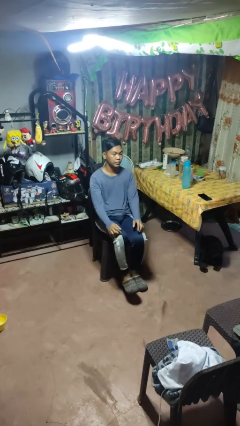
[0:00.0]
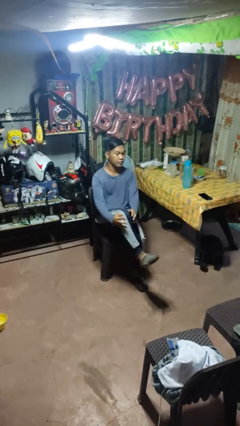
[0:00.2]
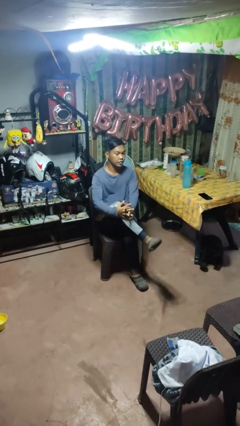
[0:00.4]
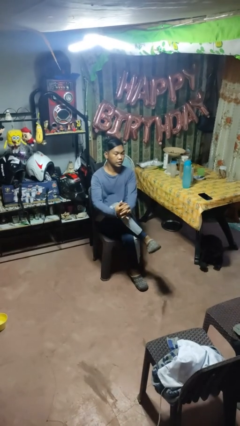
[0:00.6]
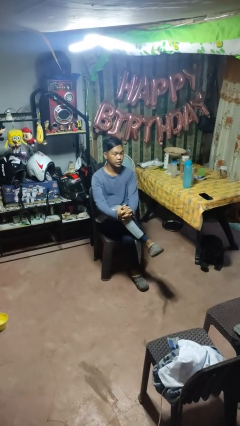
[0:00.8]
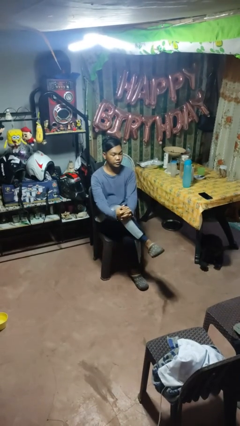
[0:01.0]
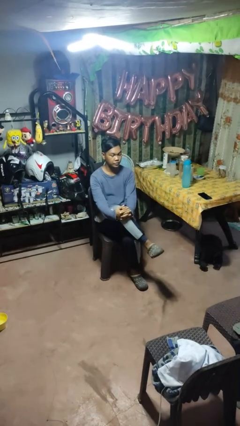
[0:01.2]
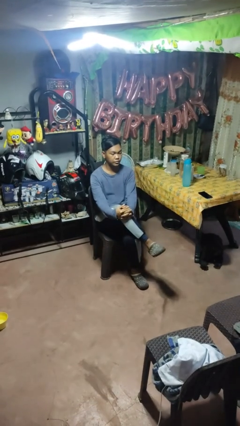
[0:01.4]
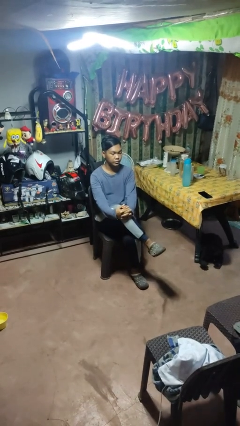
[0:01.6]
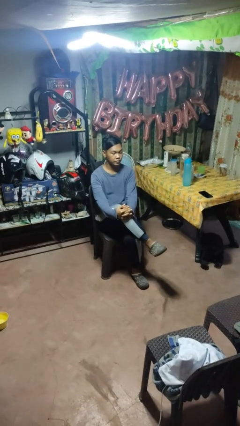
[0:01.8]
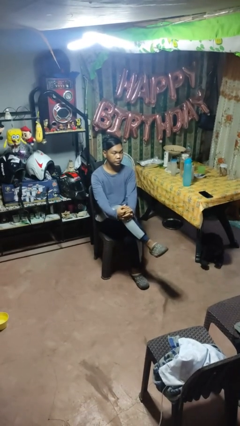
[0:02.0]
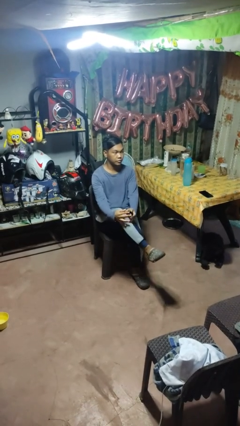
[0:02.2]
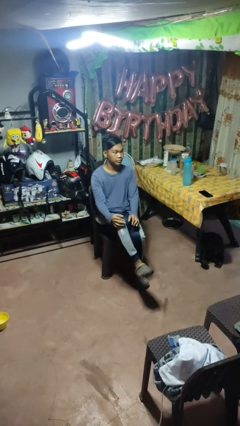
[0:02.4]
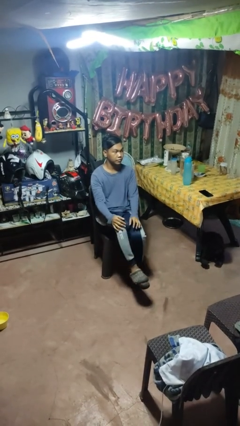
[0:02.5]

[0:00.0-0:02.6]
person crosses legs

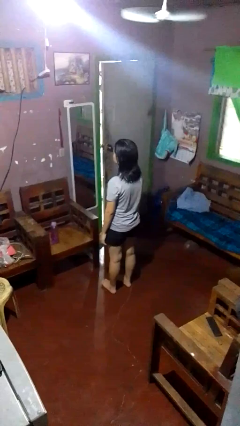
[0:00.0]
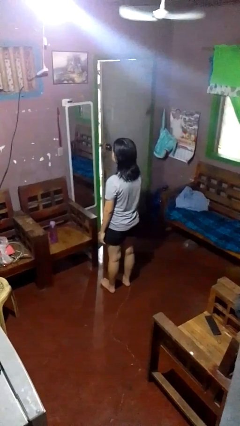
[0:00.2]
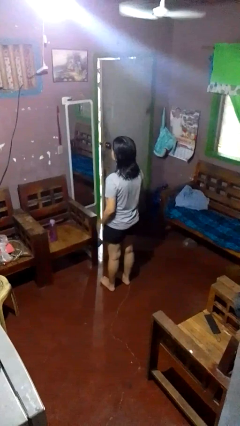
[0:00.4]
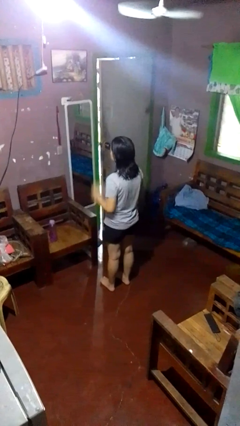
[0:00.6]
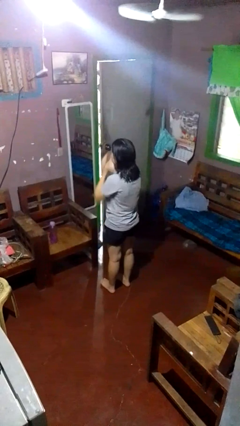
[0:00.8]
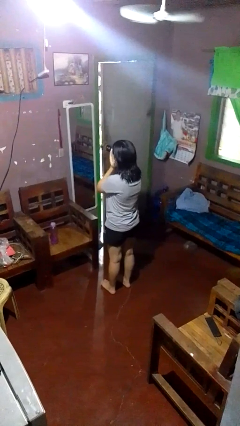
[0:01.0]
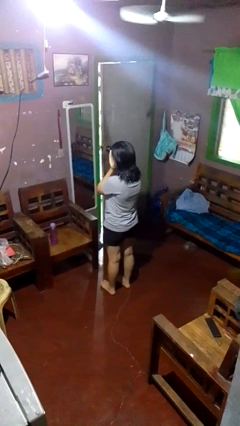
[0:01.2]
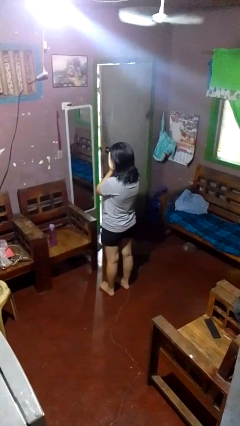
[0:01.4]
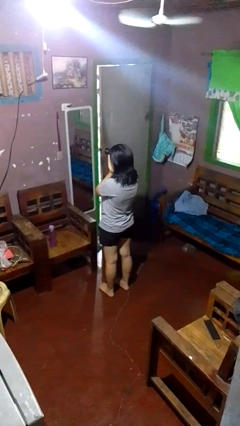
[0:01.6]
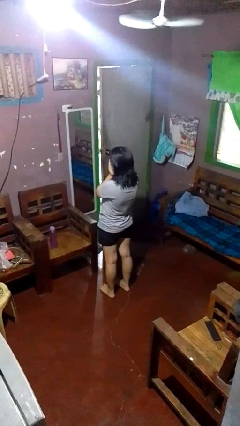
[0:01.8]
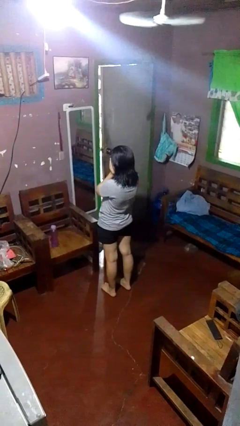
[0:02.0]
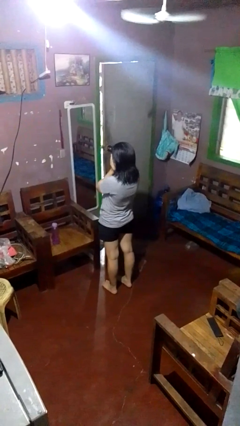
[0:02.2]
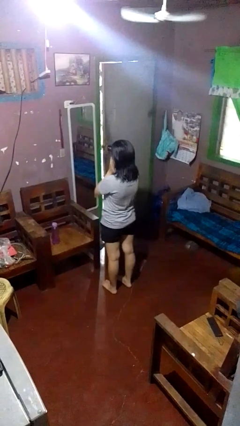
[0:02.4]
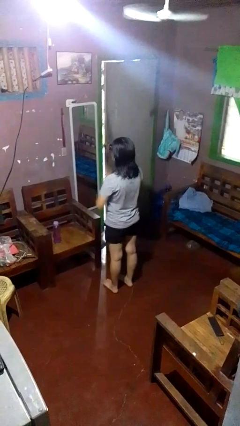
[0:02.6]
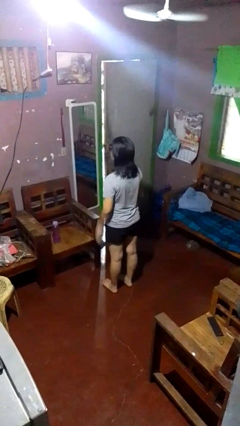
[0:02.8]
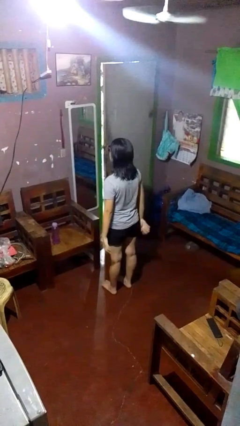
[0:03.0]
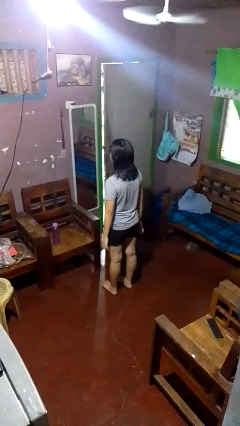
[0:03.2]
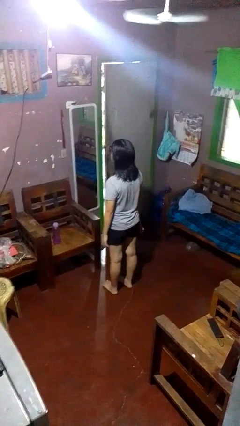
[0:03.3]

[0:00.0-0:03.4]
person covers face with hands

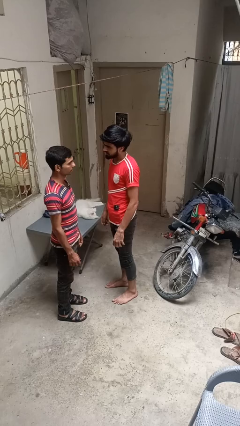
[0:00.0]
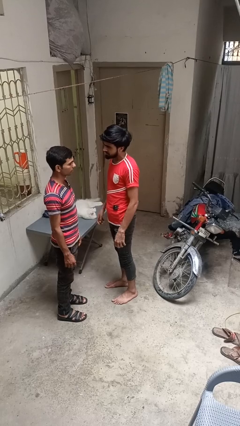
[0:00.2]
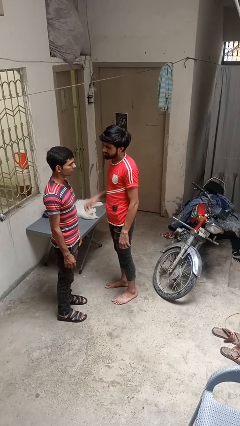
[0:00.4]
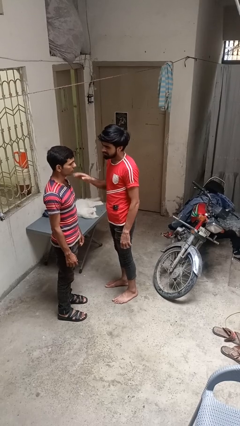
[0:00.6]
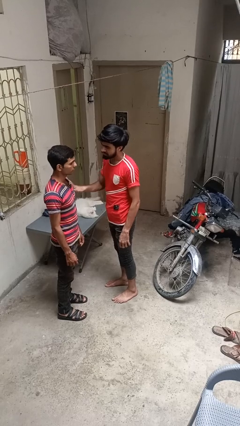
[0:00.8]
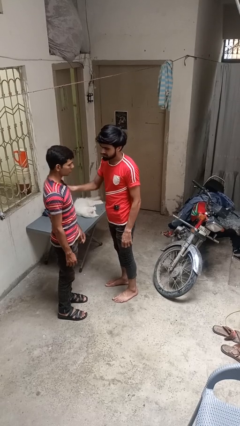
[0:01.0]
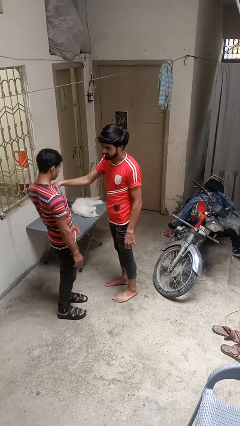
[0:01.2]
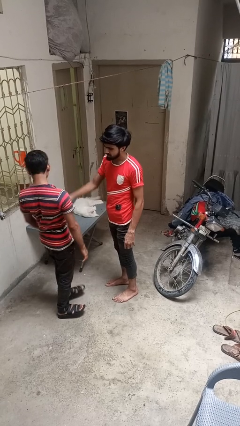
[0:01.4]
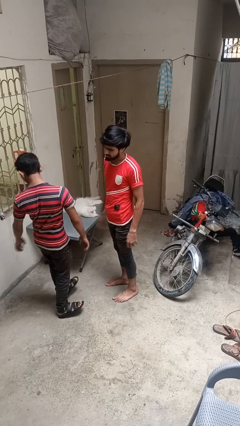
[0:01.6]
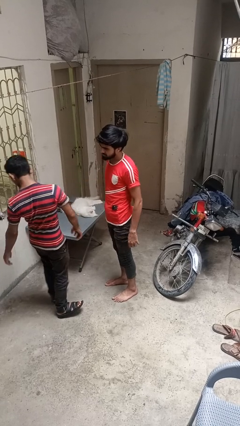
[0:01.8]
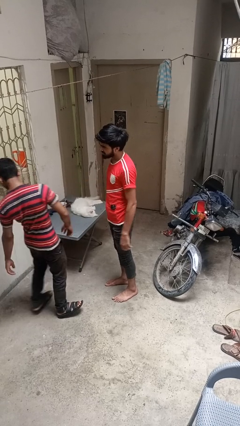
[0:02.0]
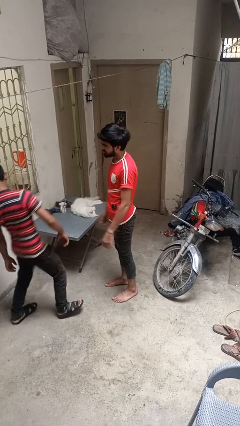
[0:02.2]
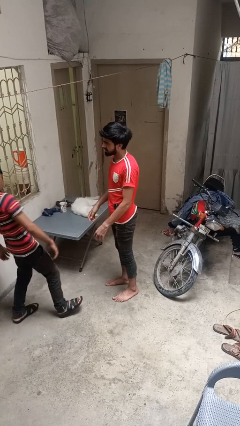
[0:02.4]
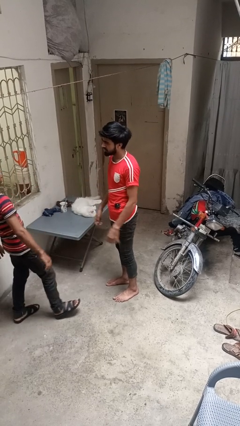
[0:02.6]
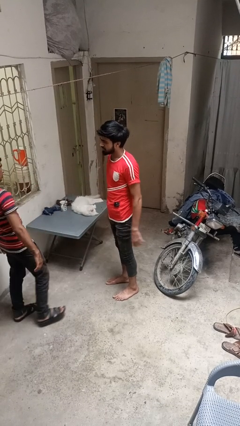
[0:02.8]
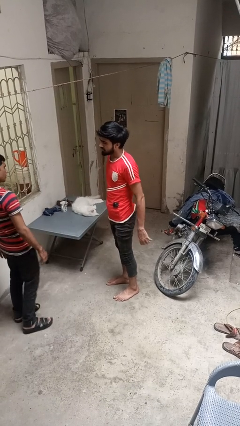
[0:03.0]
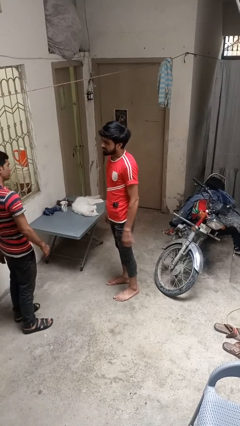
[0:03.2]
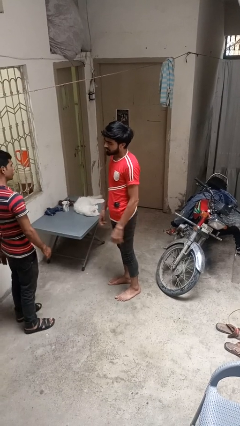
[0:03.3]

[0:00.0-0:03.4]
person shoves person

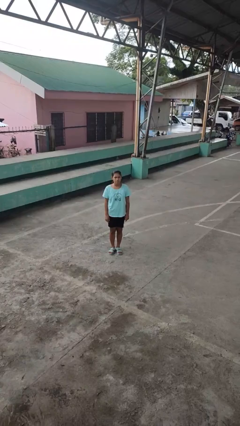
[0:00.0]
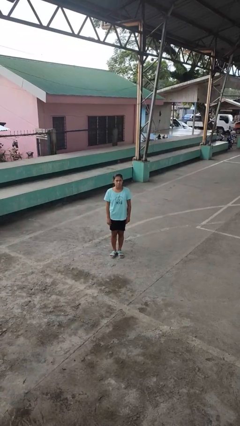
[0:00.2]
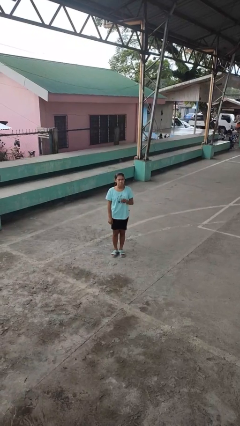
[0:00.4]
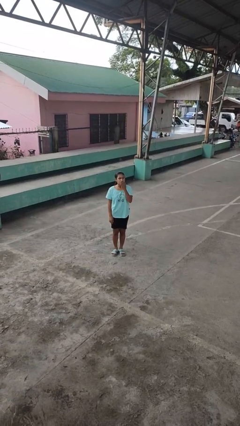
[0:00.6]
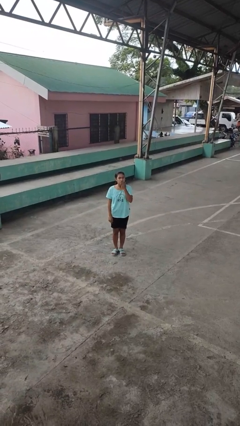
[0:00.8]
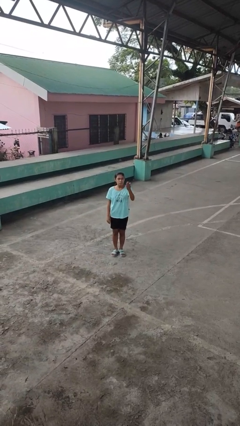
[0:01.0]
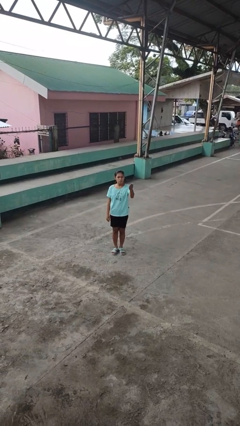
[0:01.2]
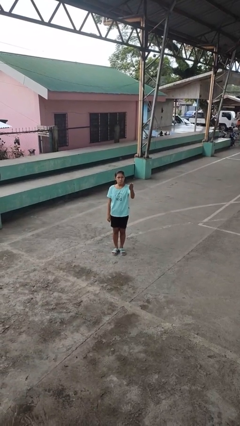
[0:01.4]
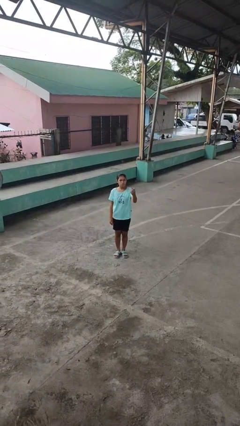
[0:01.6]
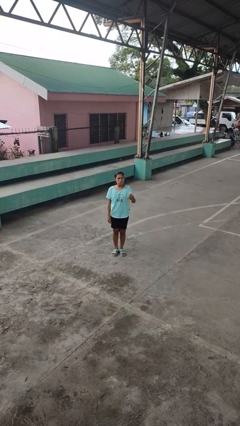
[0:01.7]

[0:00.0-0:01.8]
person gestures blow kiss

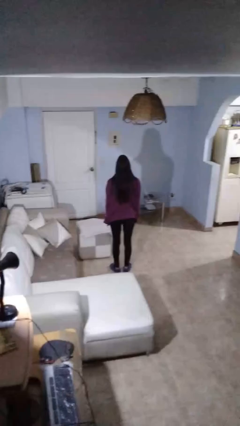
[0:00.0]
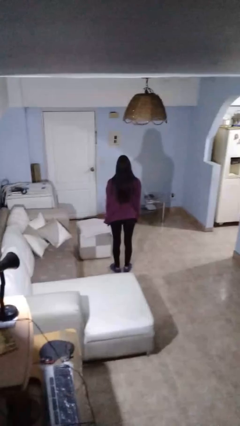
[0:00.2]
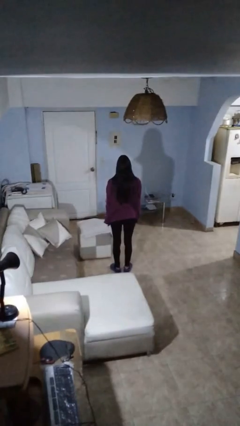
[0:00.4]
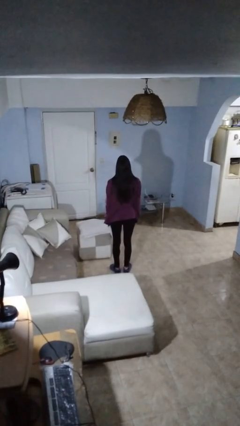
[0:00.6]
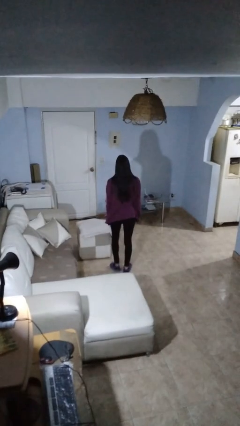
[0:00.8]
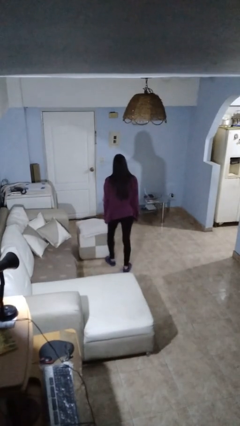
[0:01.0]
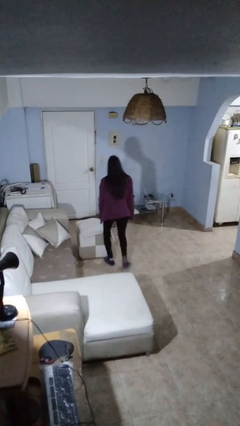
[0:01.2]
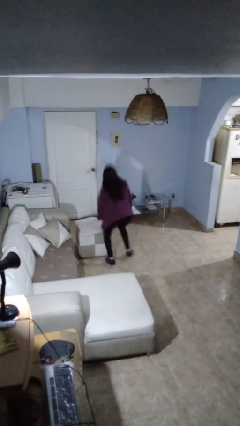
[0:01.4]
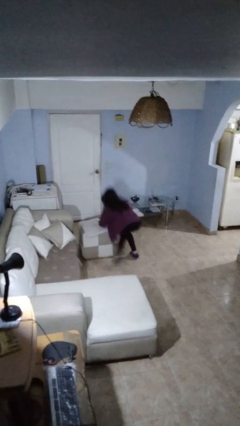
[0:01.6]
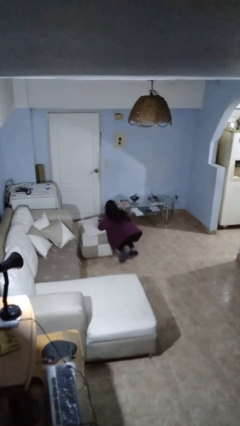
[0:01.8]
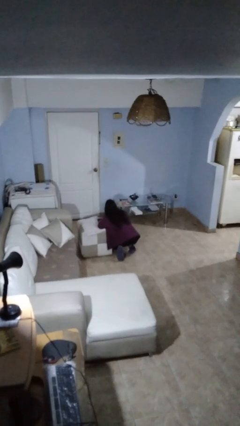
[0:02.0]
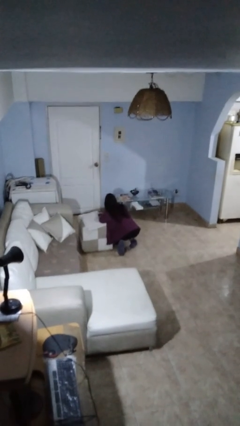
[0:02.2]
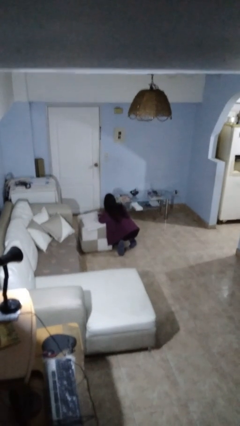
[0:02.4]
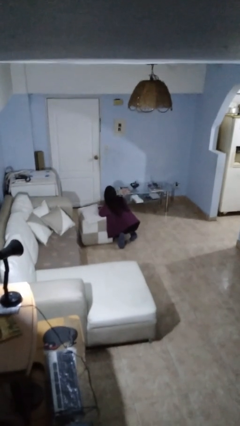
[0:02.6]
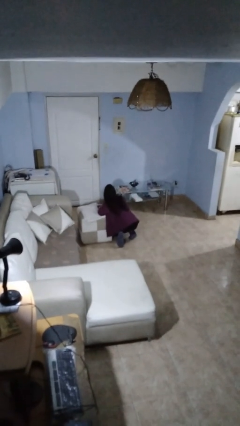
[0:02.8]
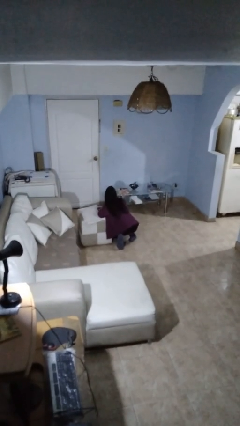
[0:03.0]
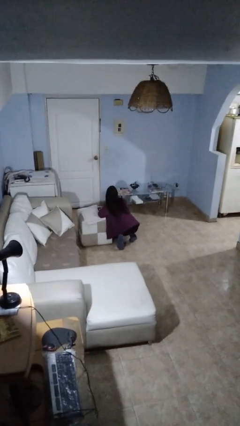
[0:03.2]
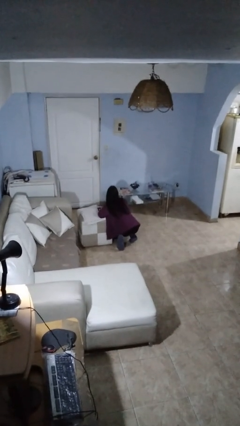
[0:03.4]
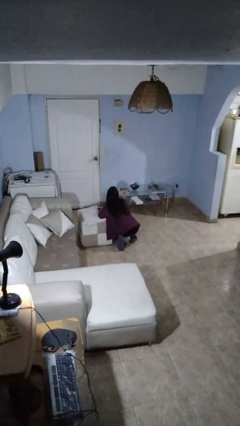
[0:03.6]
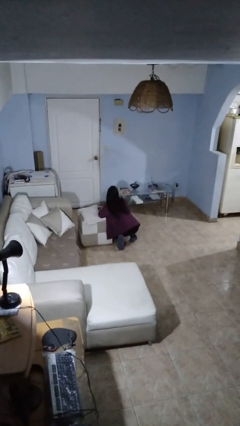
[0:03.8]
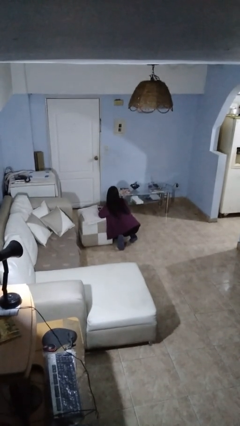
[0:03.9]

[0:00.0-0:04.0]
person trips on object on floor

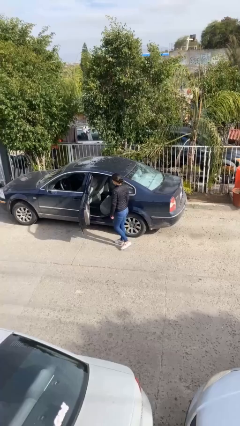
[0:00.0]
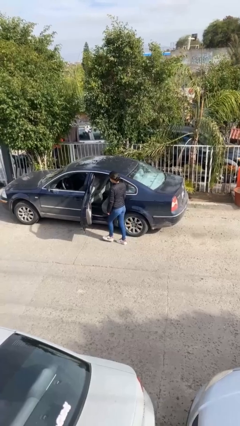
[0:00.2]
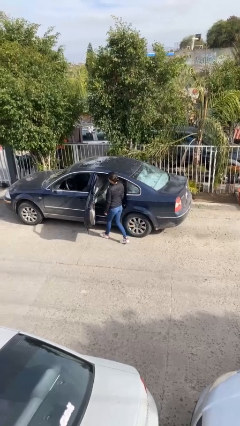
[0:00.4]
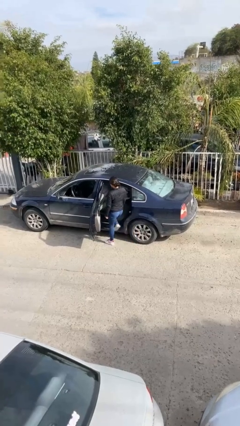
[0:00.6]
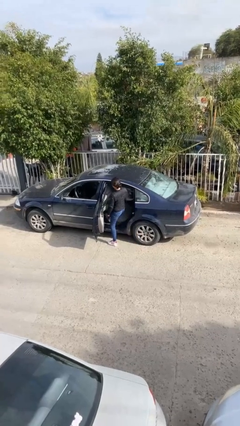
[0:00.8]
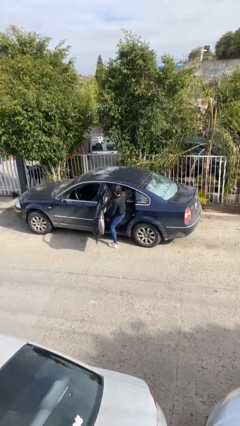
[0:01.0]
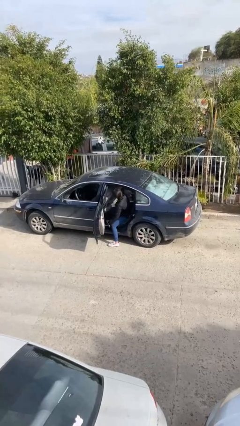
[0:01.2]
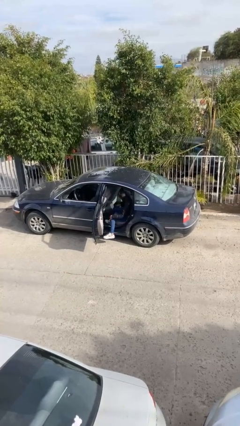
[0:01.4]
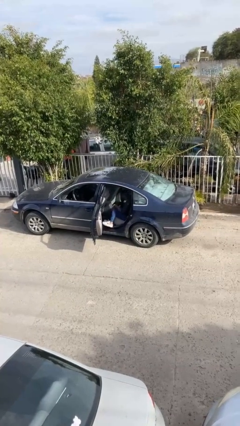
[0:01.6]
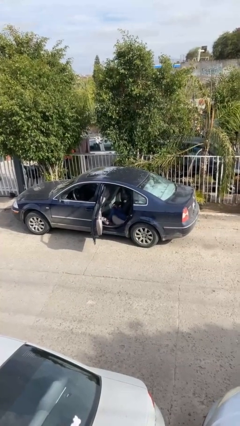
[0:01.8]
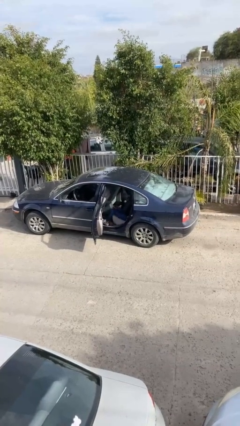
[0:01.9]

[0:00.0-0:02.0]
person enters car

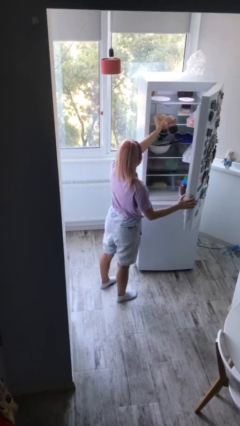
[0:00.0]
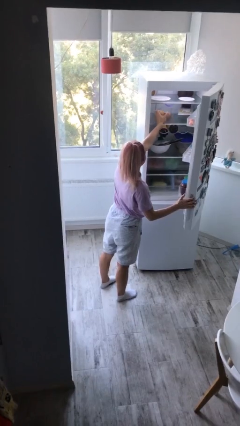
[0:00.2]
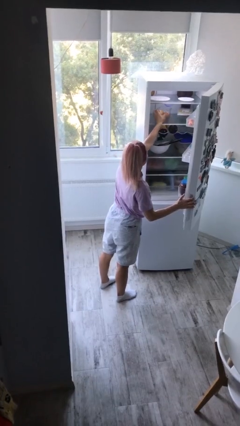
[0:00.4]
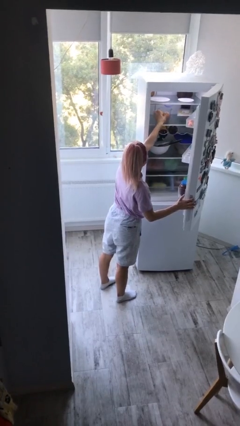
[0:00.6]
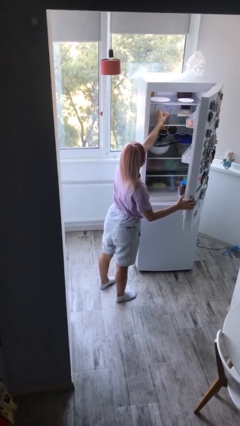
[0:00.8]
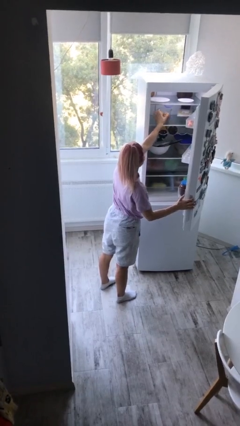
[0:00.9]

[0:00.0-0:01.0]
person puts object into refrigerator
